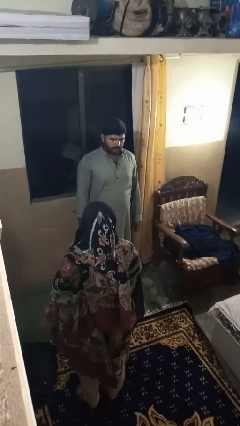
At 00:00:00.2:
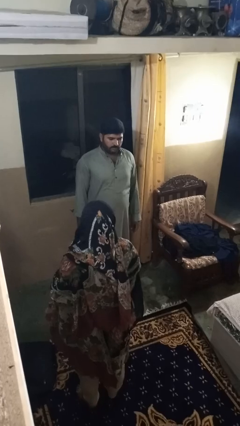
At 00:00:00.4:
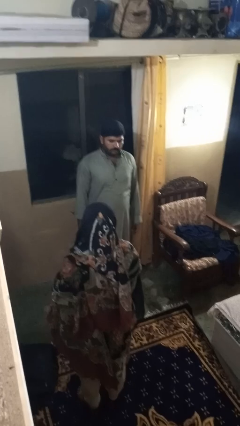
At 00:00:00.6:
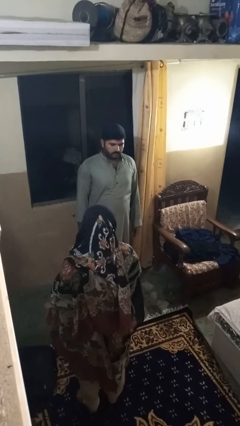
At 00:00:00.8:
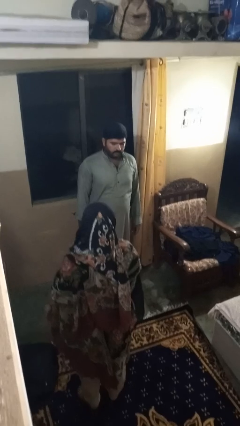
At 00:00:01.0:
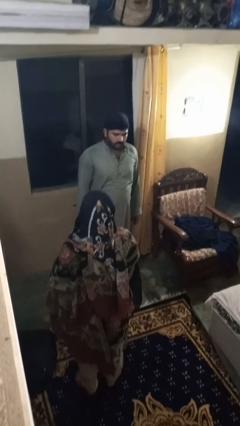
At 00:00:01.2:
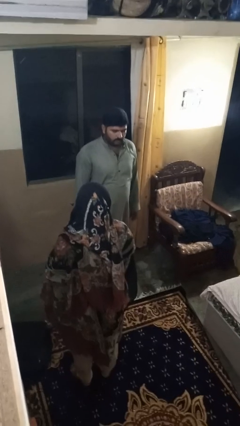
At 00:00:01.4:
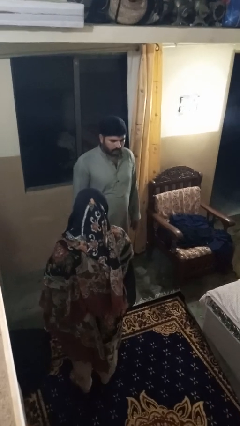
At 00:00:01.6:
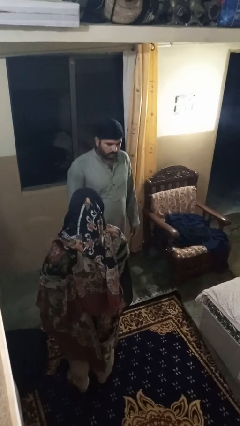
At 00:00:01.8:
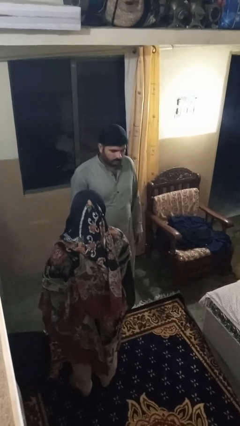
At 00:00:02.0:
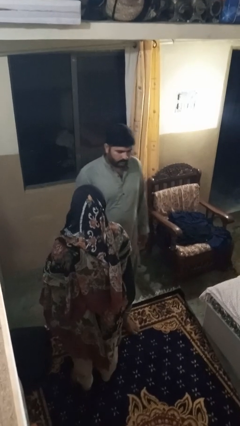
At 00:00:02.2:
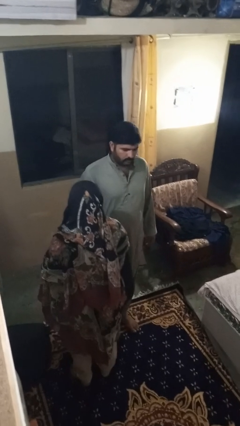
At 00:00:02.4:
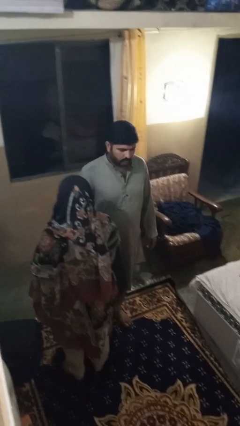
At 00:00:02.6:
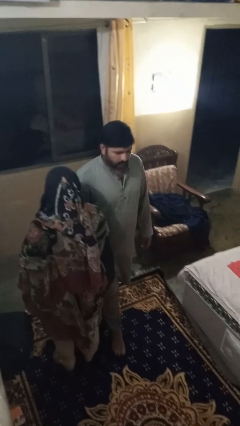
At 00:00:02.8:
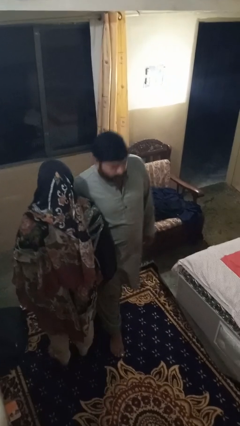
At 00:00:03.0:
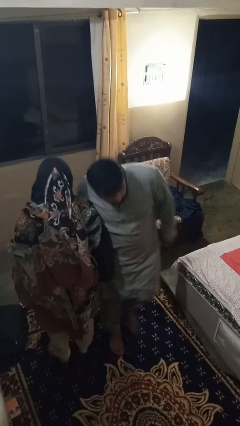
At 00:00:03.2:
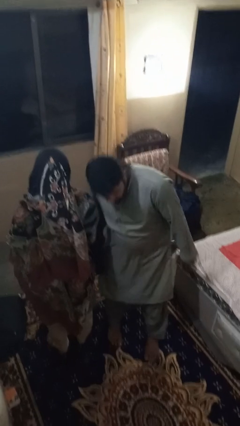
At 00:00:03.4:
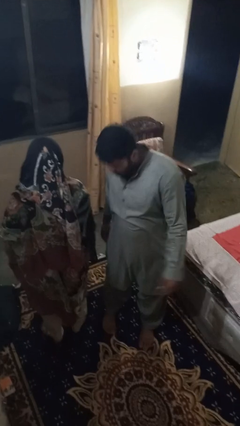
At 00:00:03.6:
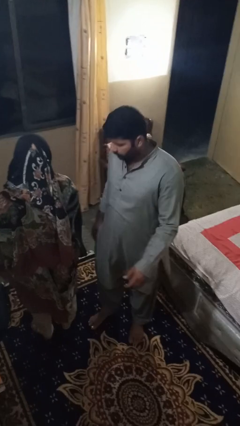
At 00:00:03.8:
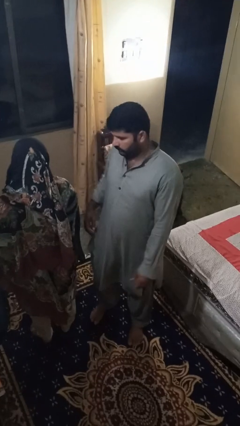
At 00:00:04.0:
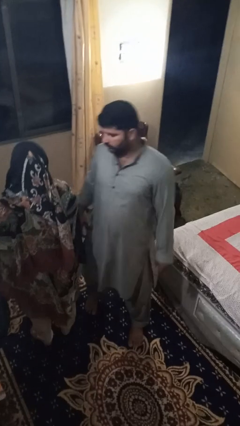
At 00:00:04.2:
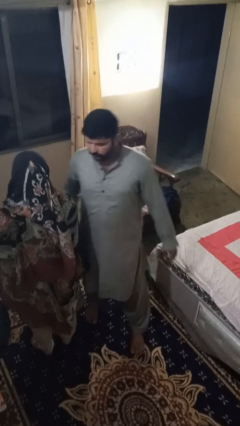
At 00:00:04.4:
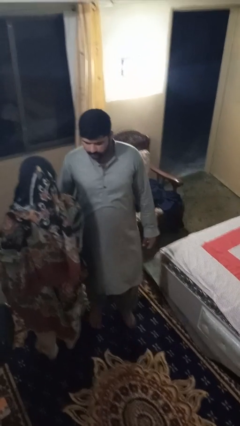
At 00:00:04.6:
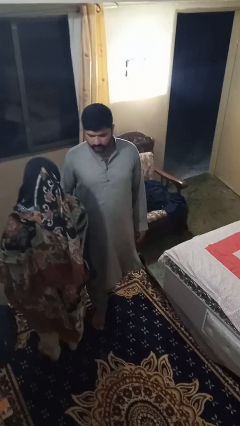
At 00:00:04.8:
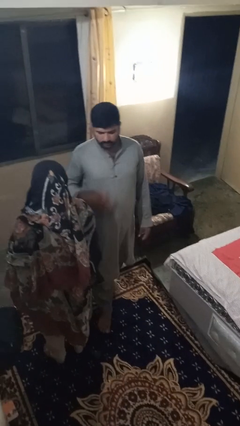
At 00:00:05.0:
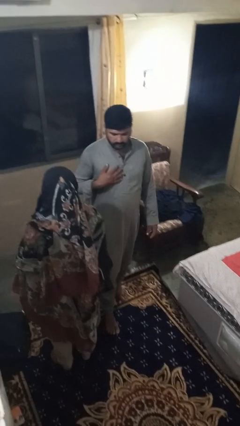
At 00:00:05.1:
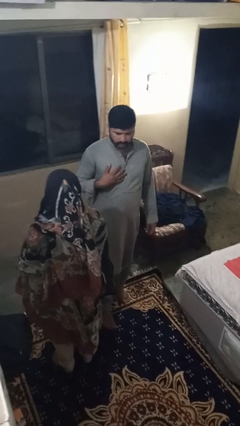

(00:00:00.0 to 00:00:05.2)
person bumps into person

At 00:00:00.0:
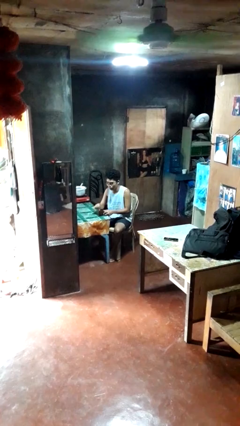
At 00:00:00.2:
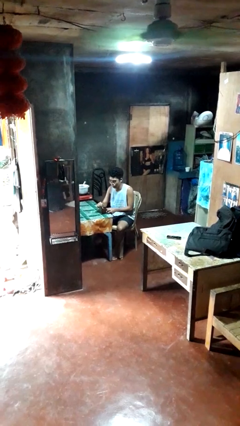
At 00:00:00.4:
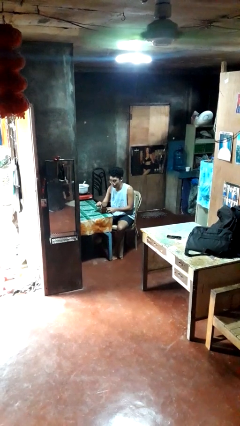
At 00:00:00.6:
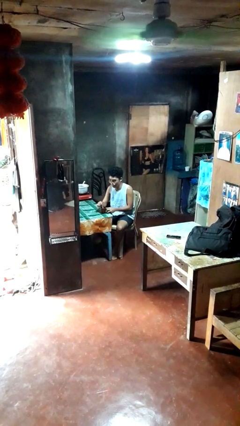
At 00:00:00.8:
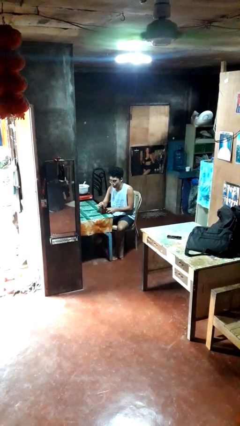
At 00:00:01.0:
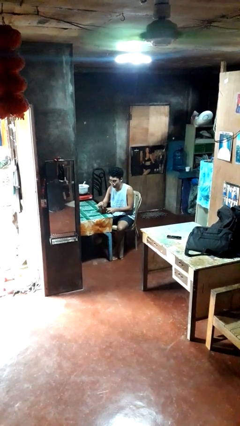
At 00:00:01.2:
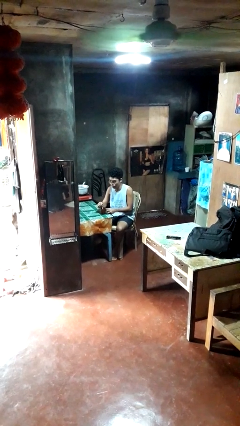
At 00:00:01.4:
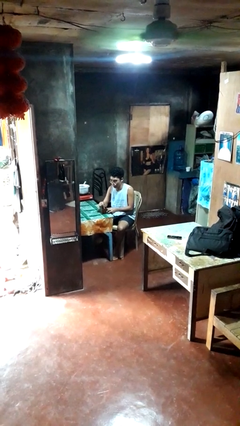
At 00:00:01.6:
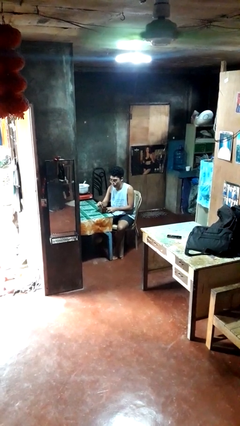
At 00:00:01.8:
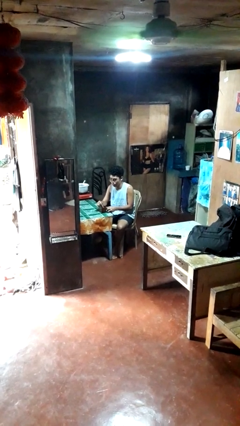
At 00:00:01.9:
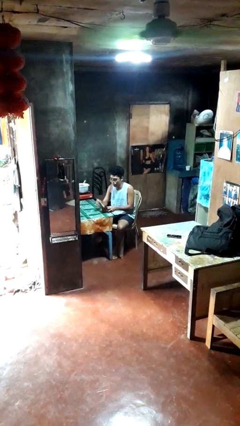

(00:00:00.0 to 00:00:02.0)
person stirs mug

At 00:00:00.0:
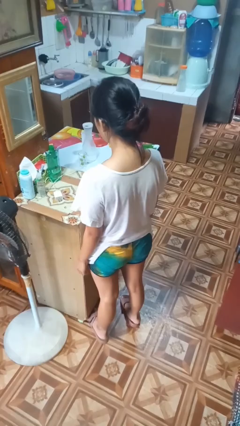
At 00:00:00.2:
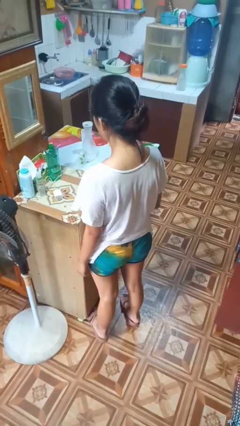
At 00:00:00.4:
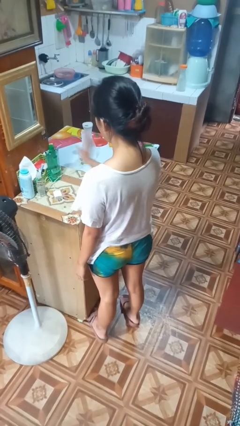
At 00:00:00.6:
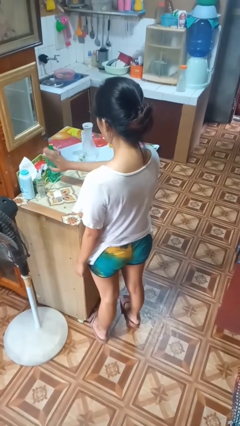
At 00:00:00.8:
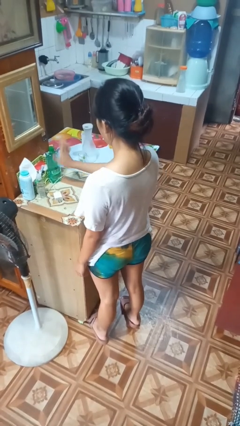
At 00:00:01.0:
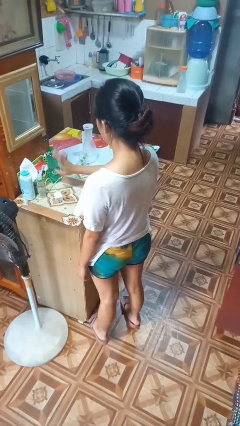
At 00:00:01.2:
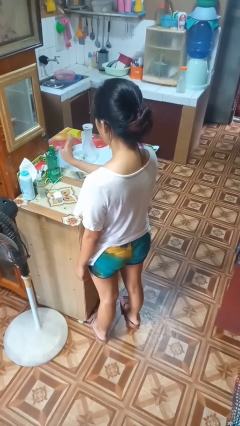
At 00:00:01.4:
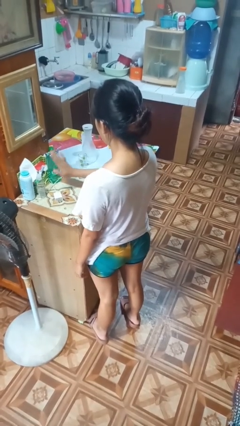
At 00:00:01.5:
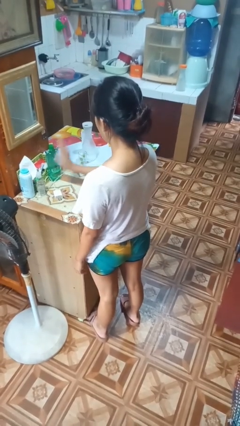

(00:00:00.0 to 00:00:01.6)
person waves hand over object

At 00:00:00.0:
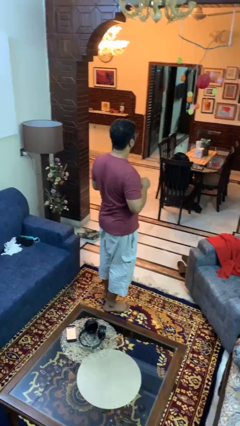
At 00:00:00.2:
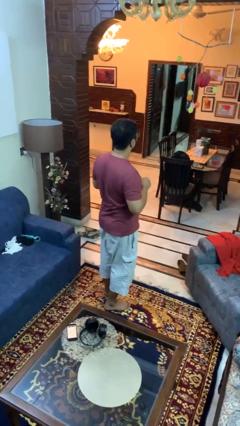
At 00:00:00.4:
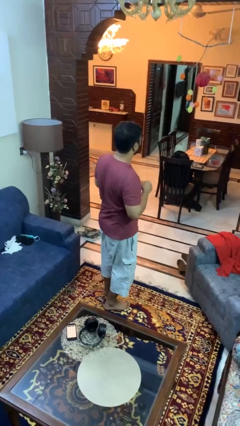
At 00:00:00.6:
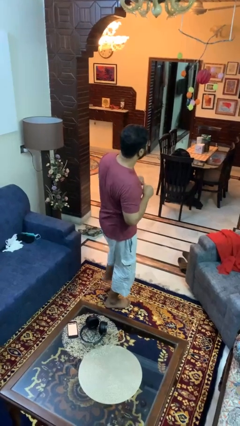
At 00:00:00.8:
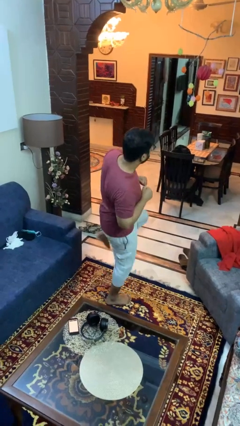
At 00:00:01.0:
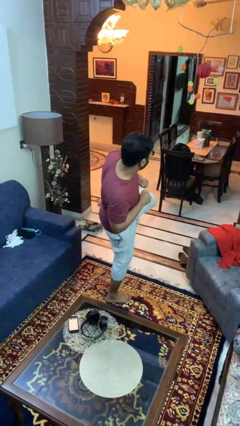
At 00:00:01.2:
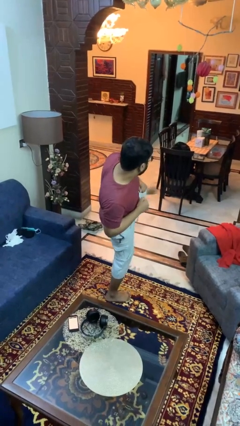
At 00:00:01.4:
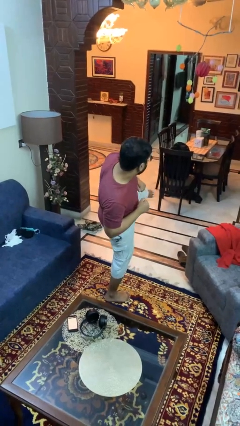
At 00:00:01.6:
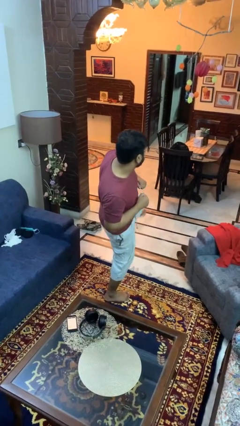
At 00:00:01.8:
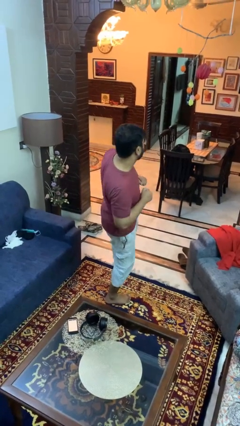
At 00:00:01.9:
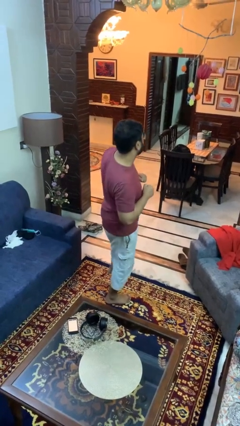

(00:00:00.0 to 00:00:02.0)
person karate kicks

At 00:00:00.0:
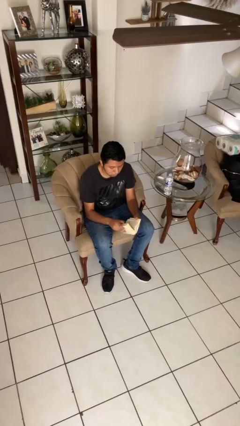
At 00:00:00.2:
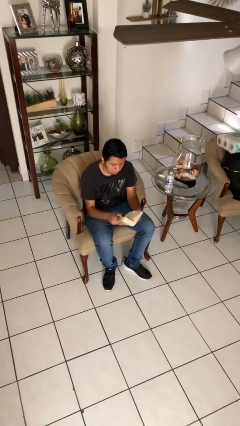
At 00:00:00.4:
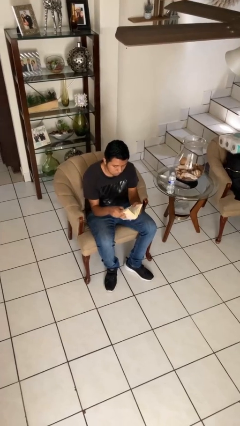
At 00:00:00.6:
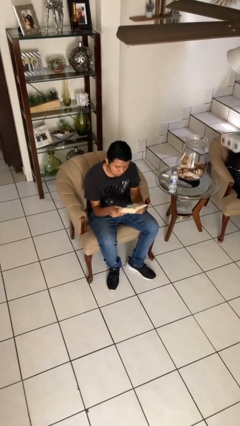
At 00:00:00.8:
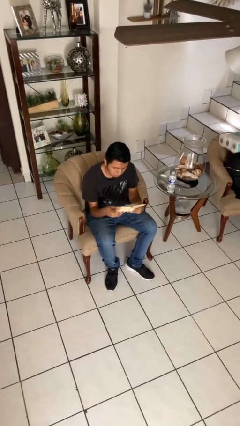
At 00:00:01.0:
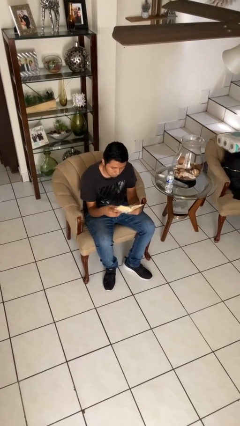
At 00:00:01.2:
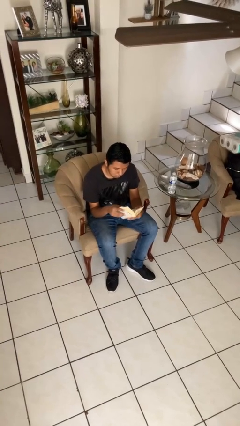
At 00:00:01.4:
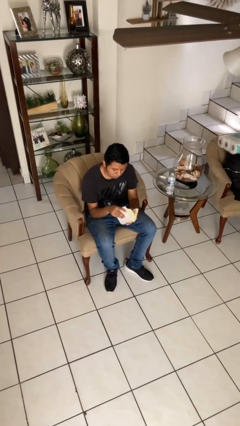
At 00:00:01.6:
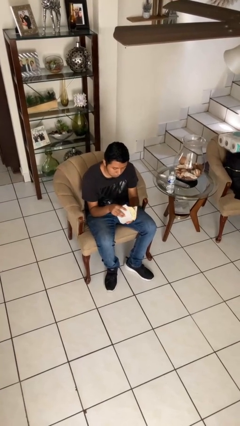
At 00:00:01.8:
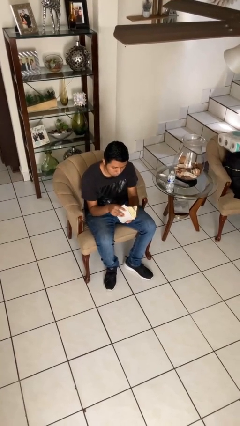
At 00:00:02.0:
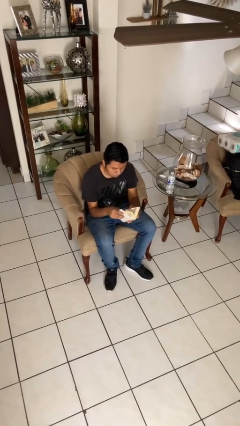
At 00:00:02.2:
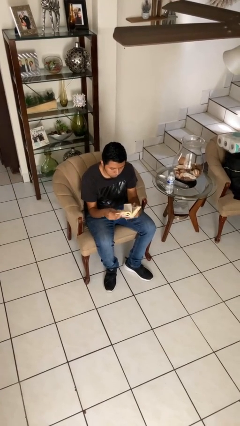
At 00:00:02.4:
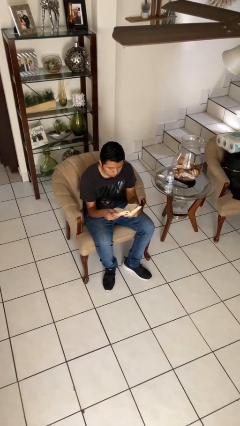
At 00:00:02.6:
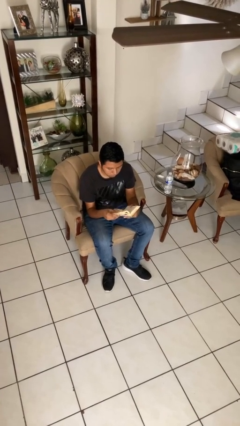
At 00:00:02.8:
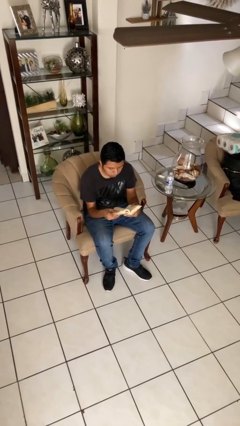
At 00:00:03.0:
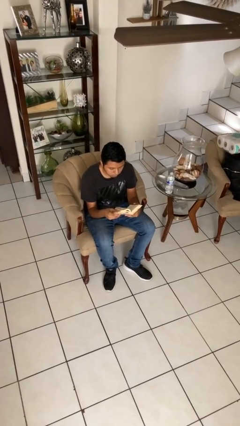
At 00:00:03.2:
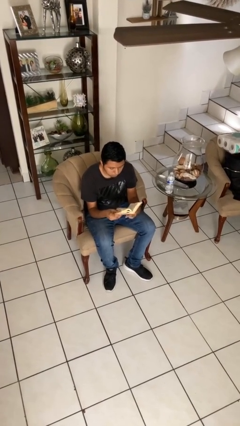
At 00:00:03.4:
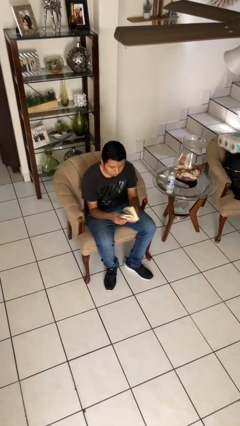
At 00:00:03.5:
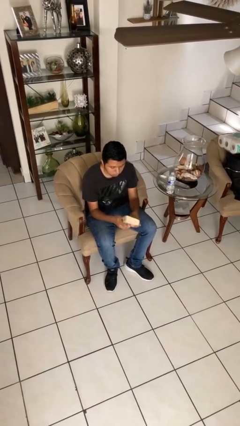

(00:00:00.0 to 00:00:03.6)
person reads book

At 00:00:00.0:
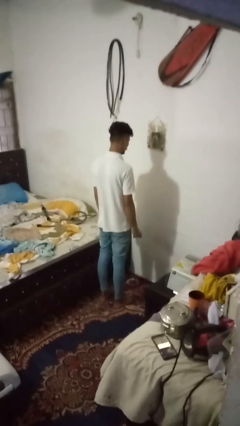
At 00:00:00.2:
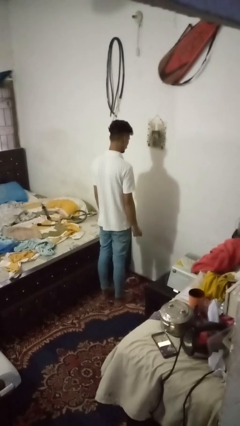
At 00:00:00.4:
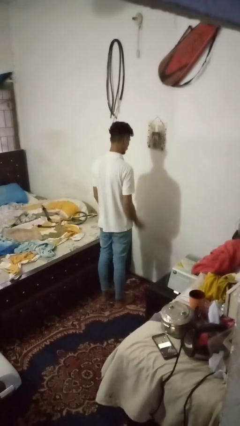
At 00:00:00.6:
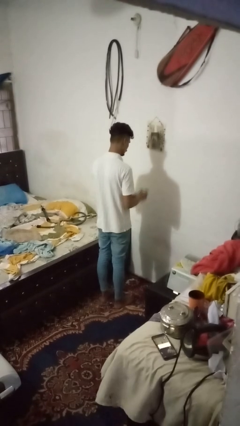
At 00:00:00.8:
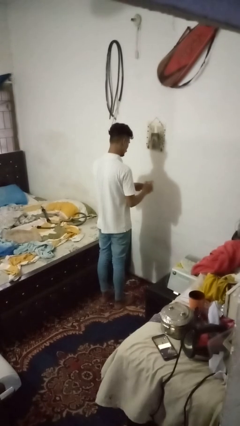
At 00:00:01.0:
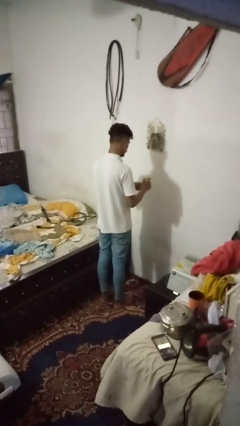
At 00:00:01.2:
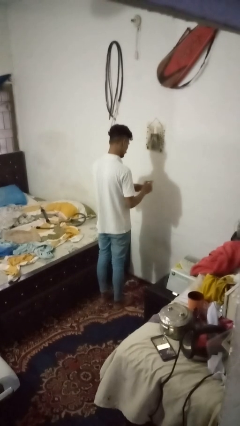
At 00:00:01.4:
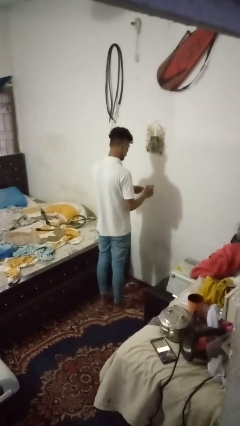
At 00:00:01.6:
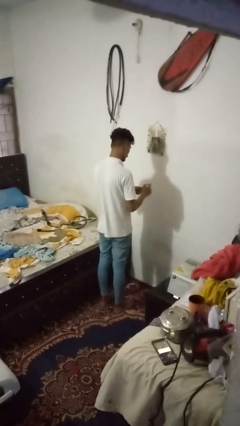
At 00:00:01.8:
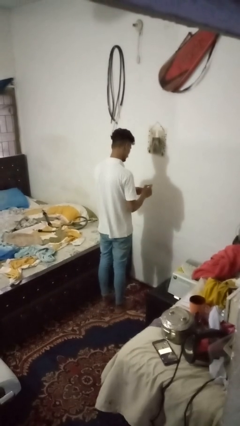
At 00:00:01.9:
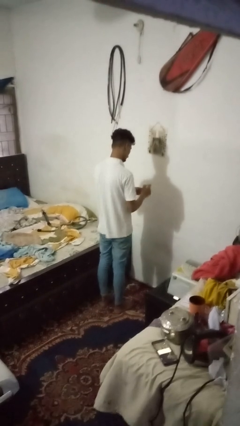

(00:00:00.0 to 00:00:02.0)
person paints fingernails

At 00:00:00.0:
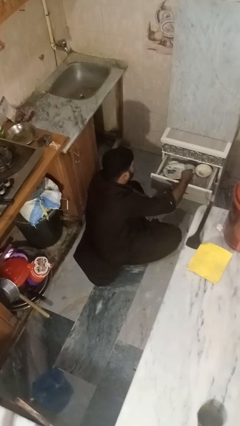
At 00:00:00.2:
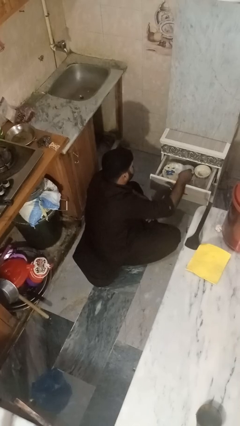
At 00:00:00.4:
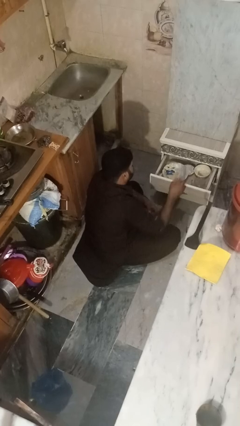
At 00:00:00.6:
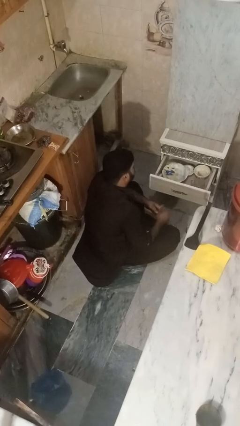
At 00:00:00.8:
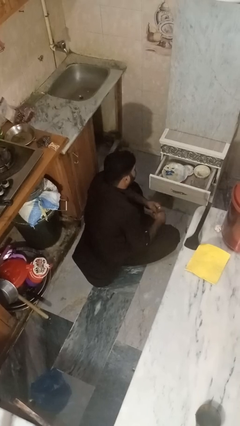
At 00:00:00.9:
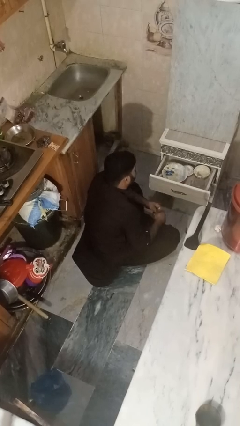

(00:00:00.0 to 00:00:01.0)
person puts object into kitchen drawer
